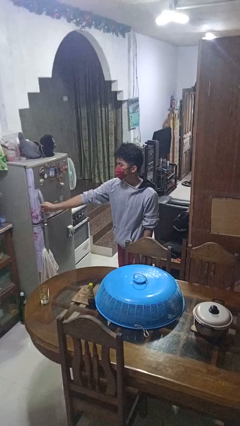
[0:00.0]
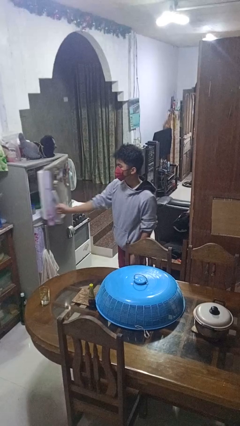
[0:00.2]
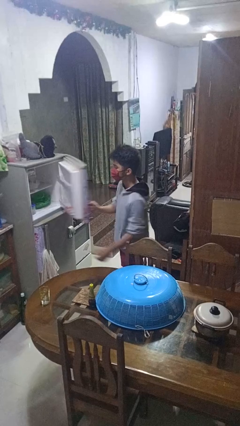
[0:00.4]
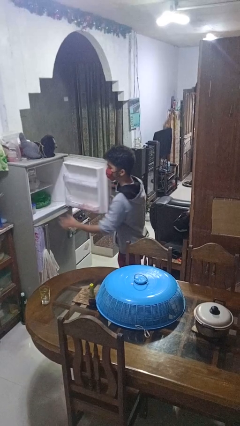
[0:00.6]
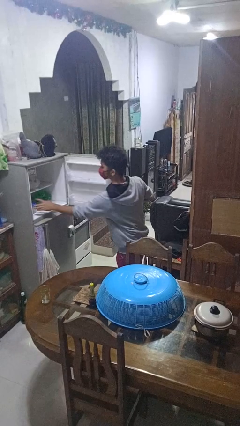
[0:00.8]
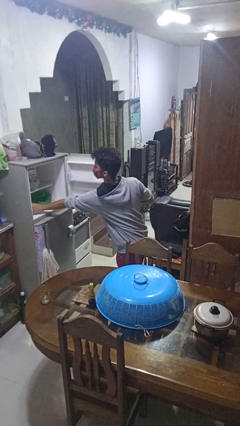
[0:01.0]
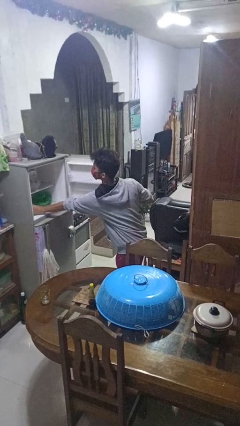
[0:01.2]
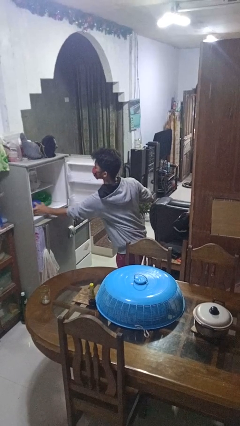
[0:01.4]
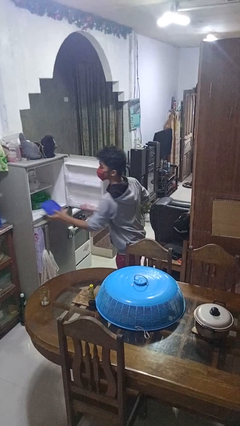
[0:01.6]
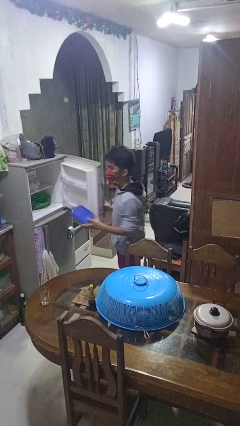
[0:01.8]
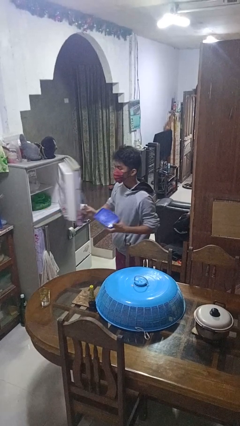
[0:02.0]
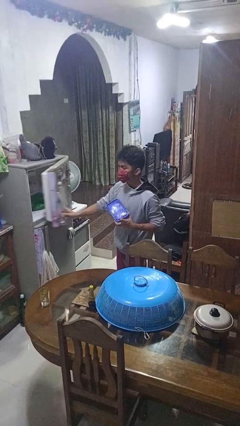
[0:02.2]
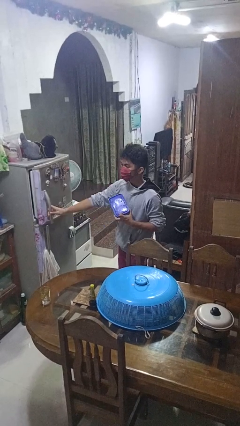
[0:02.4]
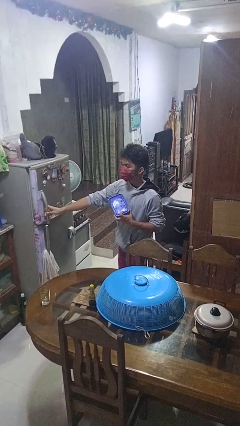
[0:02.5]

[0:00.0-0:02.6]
person takes object from refrigerator

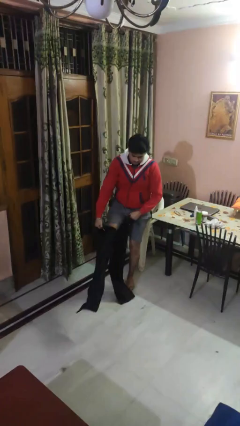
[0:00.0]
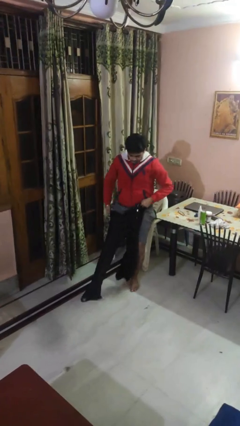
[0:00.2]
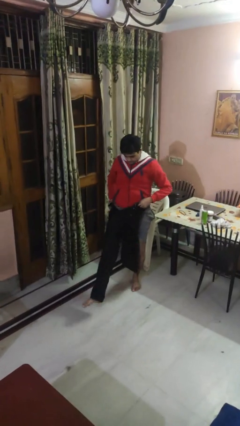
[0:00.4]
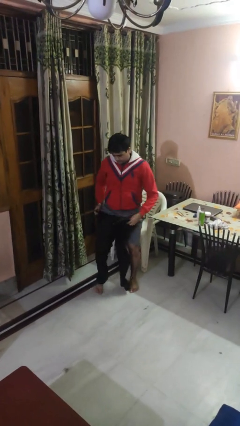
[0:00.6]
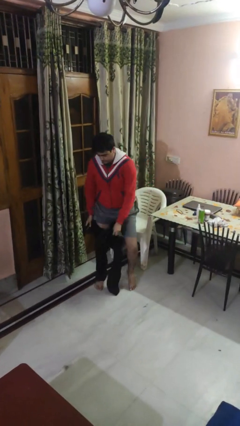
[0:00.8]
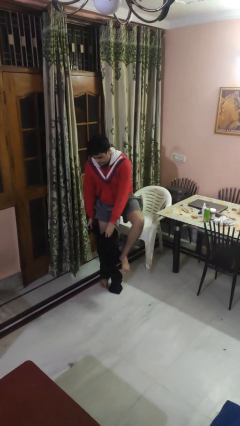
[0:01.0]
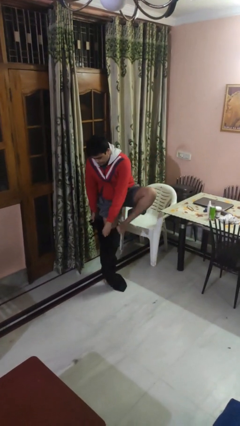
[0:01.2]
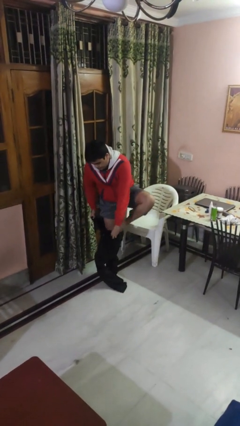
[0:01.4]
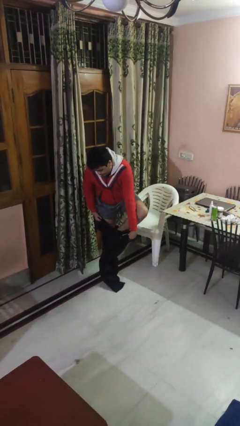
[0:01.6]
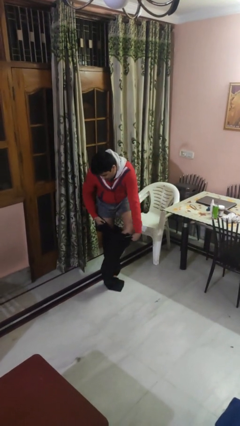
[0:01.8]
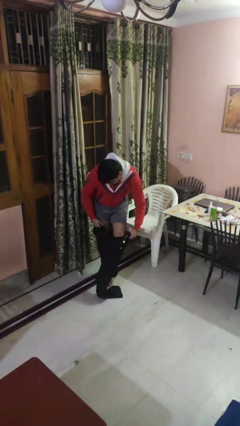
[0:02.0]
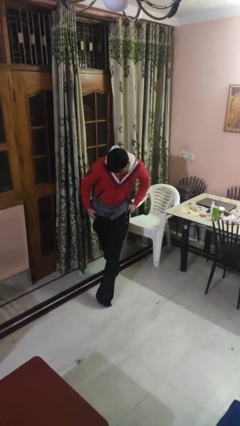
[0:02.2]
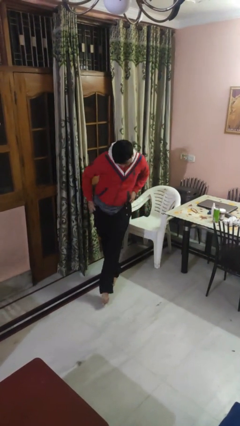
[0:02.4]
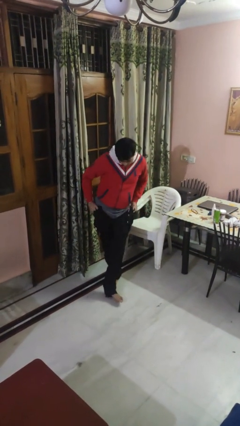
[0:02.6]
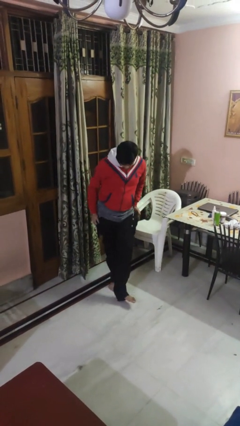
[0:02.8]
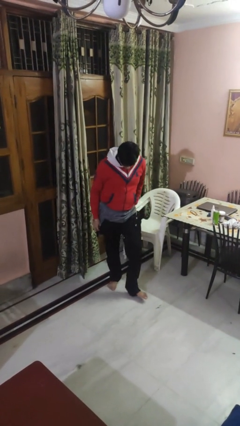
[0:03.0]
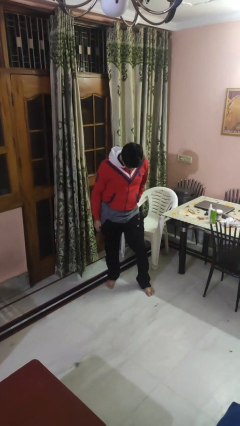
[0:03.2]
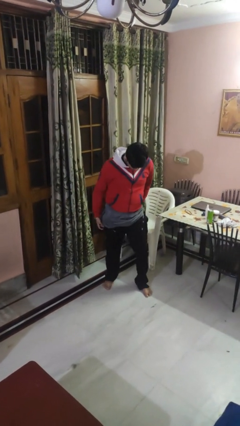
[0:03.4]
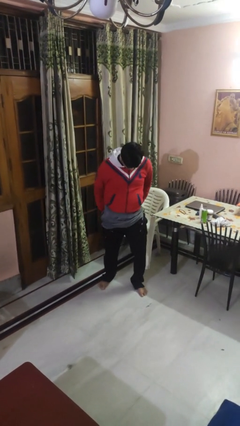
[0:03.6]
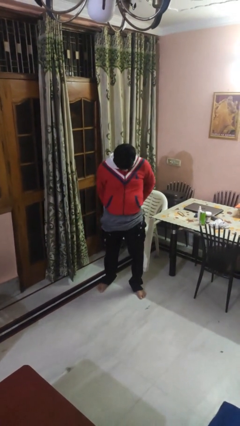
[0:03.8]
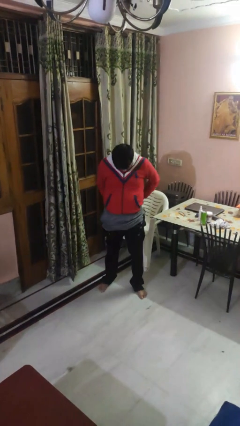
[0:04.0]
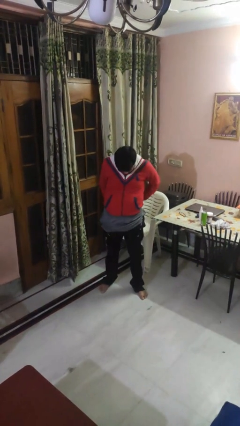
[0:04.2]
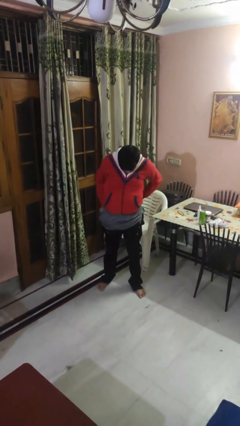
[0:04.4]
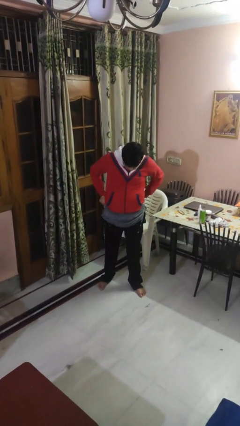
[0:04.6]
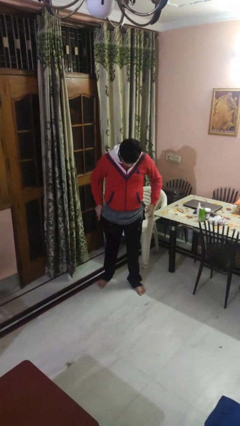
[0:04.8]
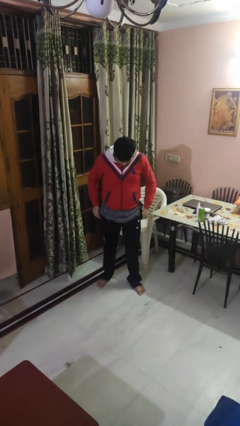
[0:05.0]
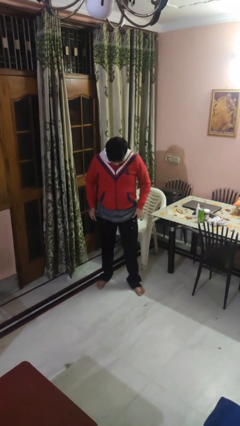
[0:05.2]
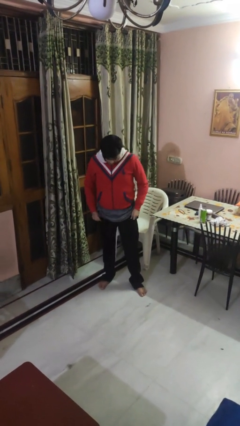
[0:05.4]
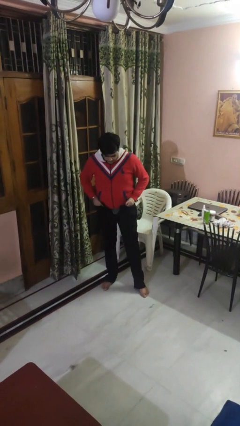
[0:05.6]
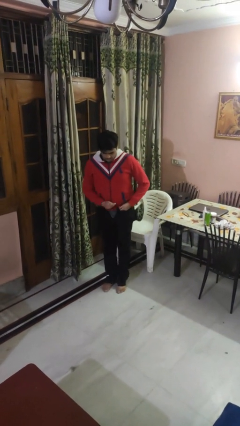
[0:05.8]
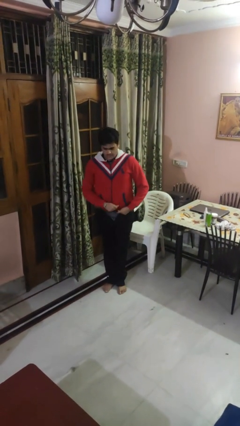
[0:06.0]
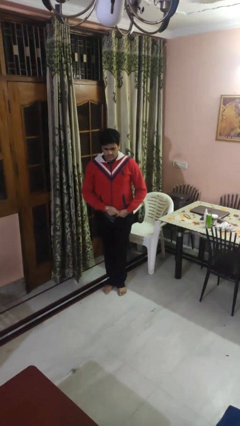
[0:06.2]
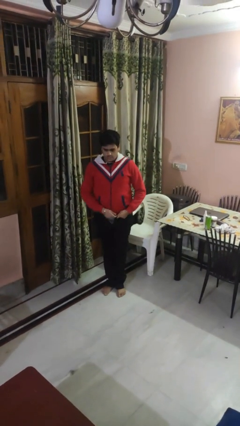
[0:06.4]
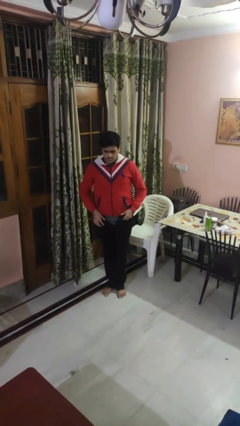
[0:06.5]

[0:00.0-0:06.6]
person puts on pants

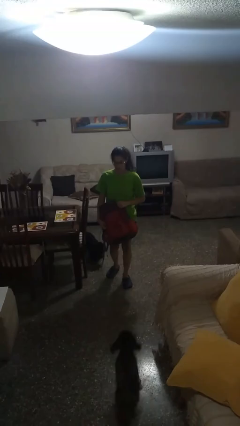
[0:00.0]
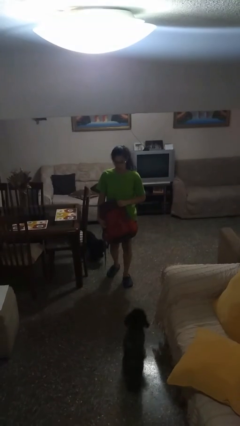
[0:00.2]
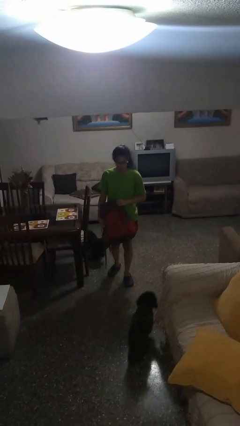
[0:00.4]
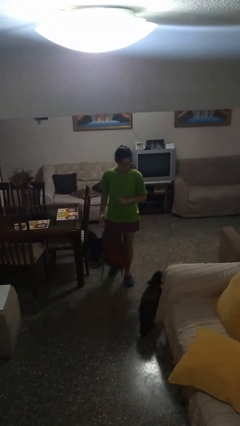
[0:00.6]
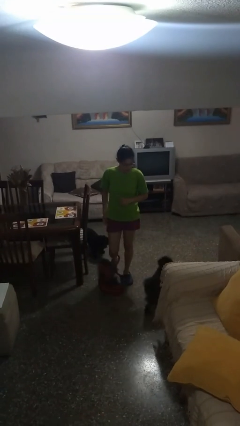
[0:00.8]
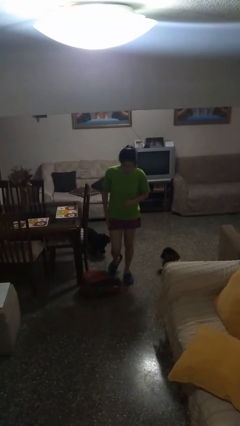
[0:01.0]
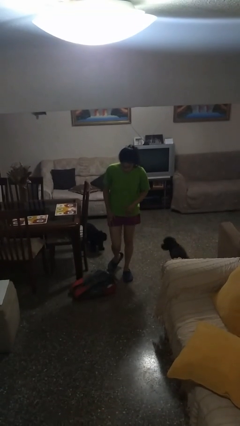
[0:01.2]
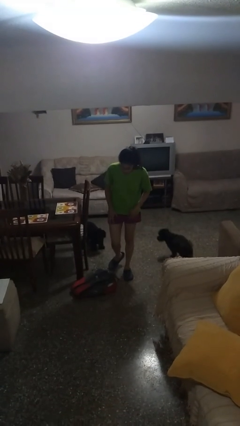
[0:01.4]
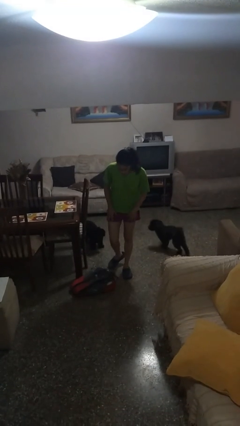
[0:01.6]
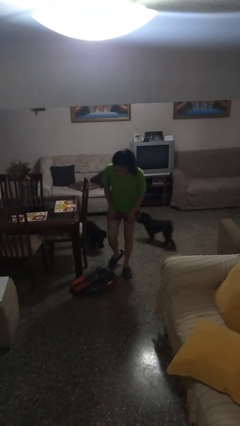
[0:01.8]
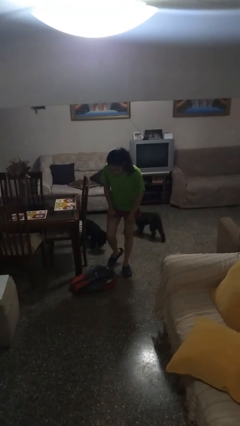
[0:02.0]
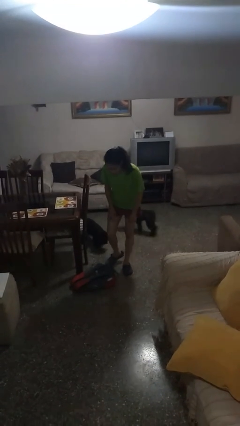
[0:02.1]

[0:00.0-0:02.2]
person drops object

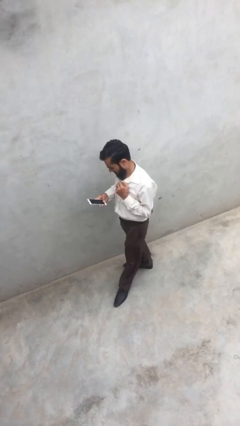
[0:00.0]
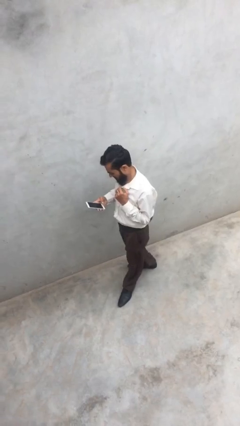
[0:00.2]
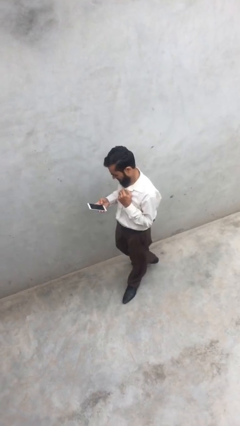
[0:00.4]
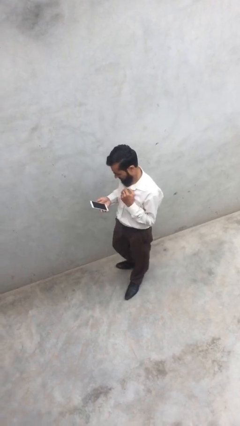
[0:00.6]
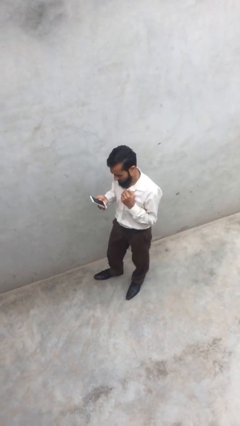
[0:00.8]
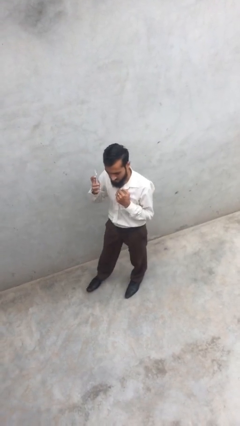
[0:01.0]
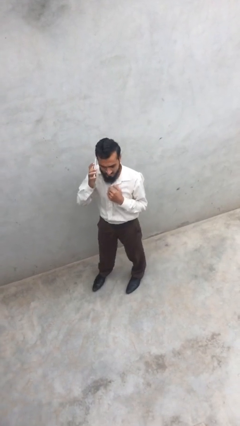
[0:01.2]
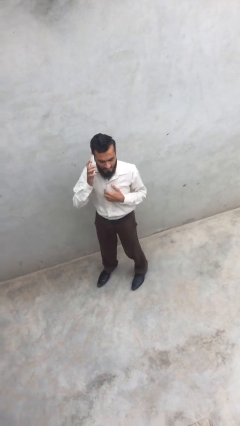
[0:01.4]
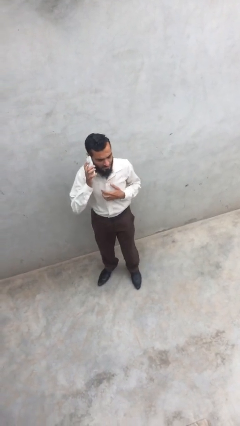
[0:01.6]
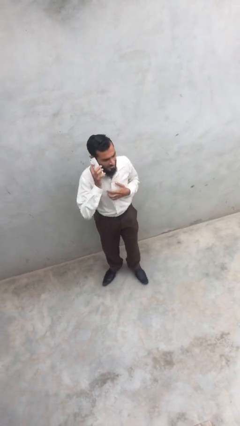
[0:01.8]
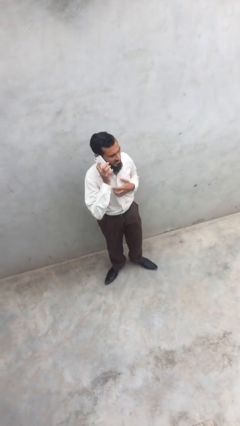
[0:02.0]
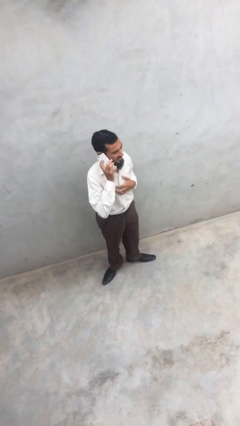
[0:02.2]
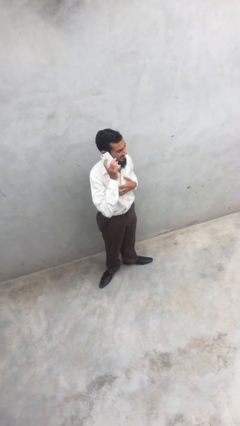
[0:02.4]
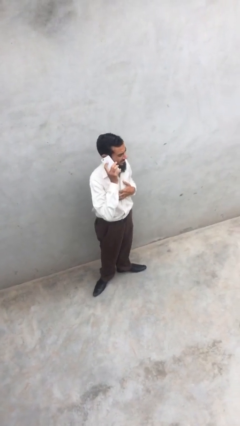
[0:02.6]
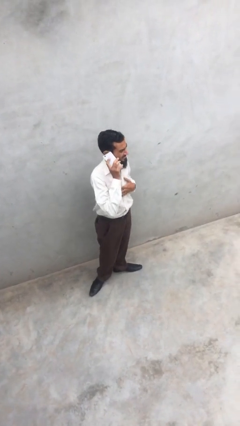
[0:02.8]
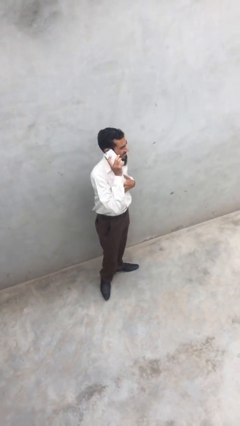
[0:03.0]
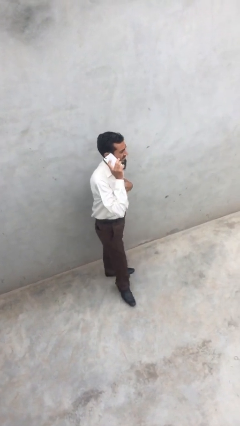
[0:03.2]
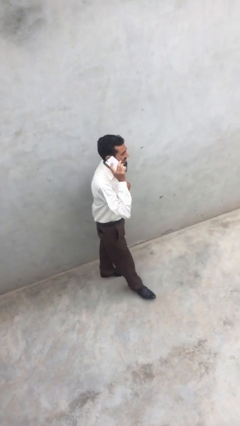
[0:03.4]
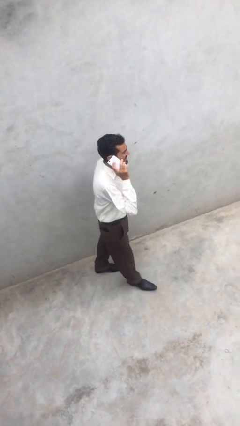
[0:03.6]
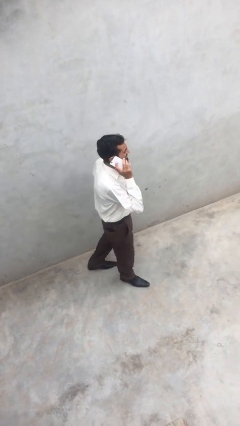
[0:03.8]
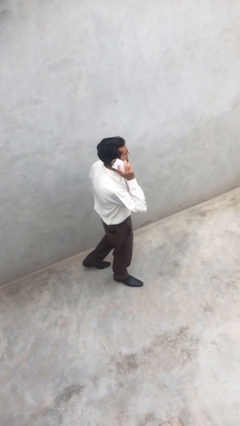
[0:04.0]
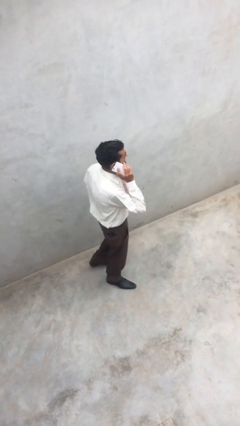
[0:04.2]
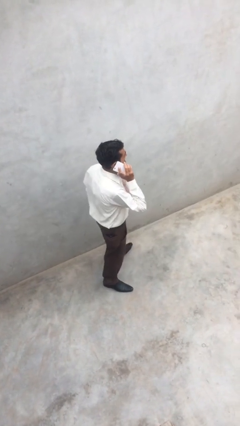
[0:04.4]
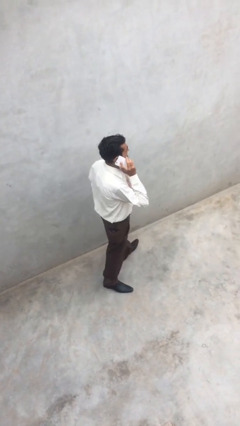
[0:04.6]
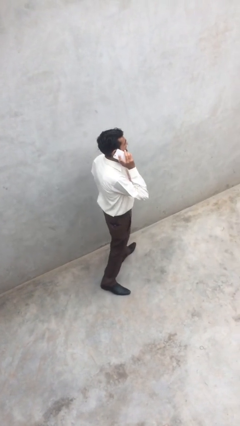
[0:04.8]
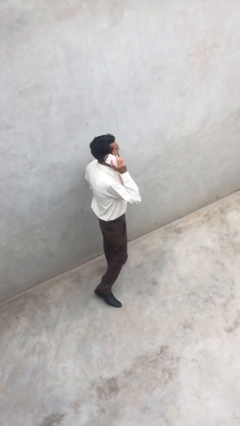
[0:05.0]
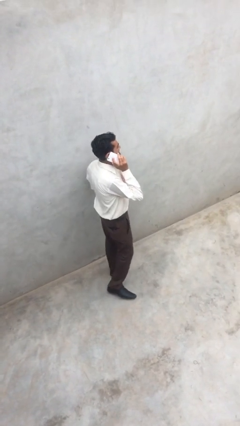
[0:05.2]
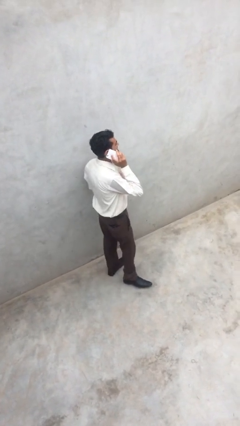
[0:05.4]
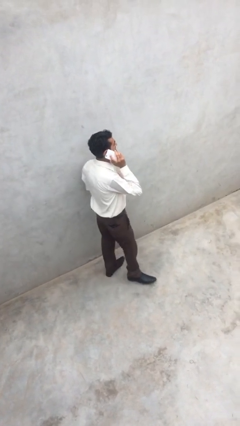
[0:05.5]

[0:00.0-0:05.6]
person talks on phone

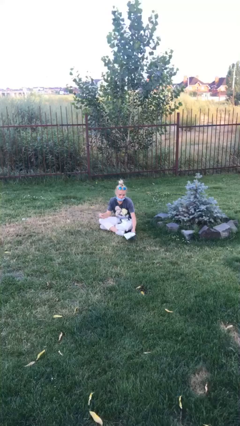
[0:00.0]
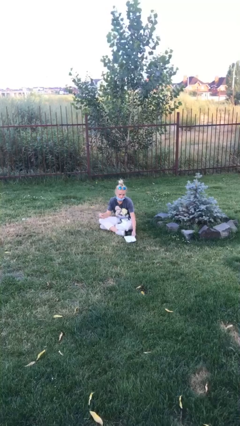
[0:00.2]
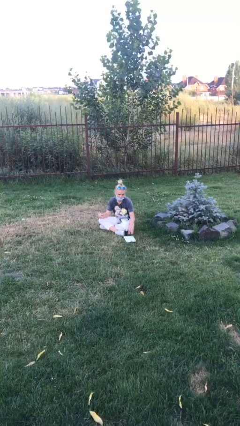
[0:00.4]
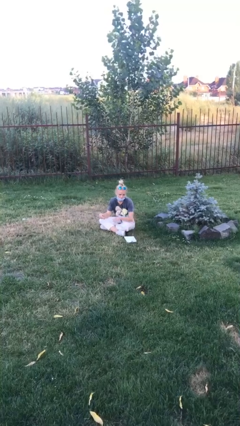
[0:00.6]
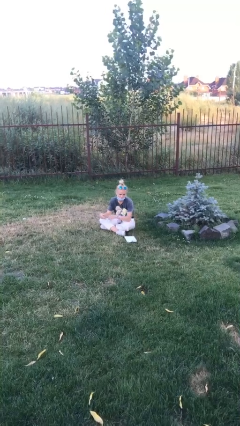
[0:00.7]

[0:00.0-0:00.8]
person puts down object on floor
